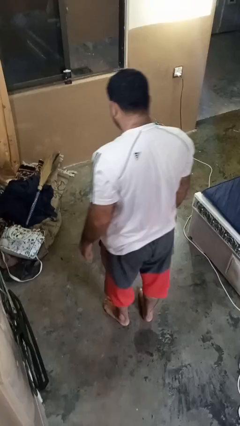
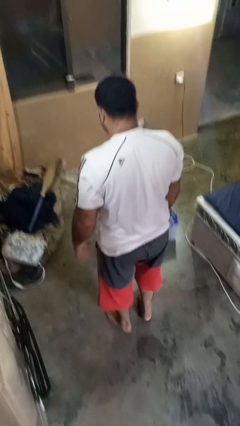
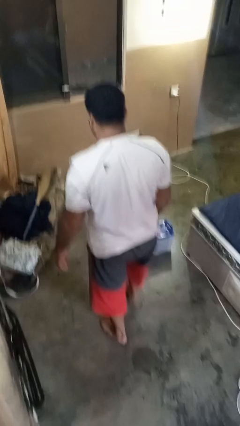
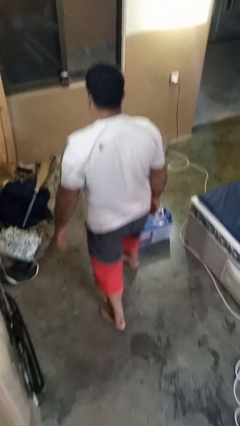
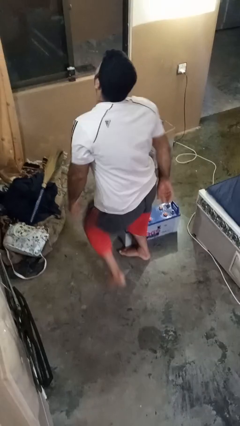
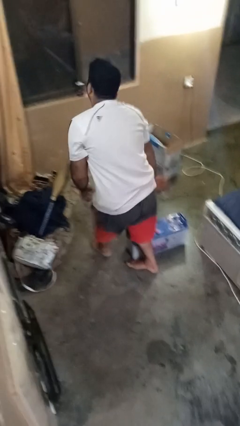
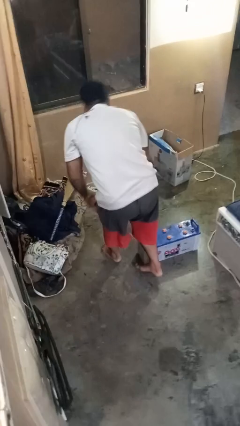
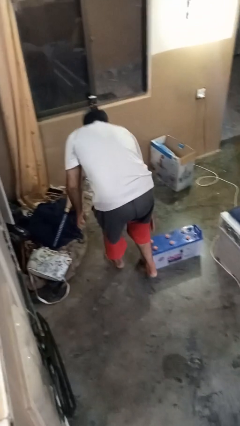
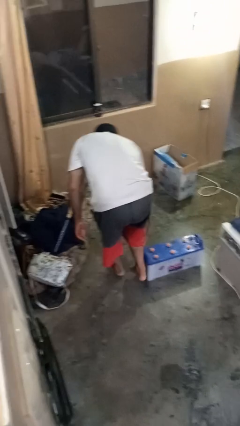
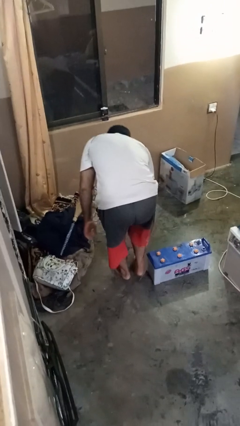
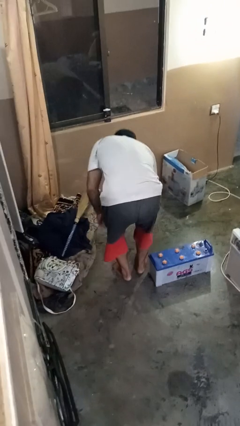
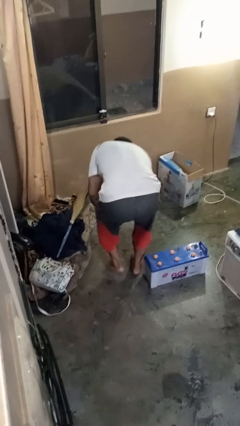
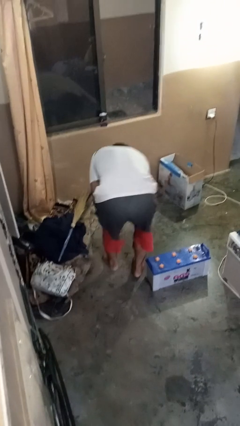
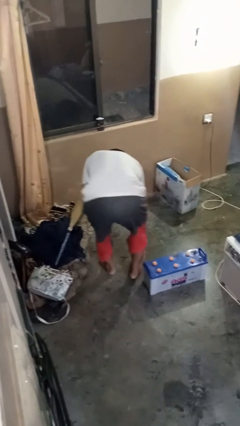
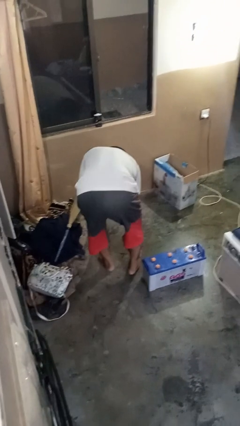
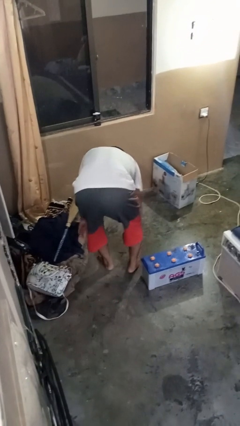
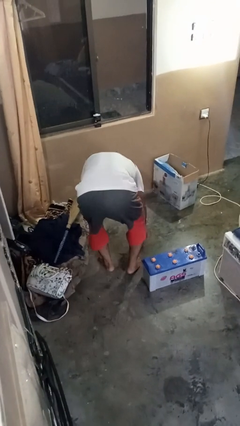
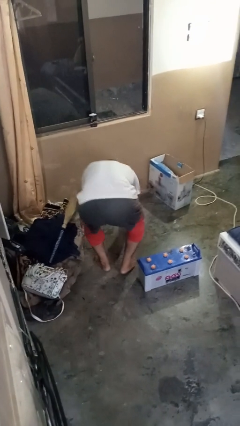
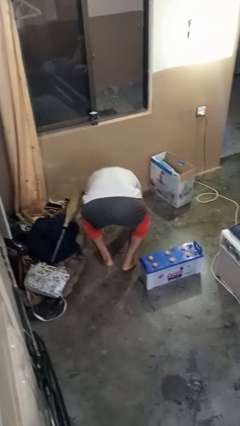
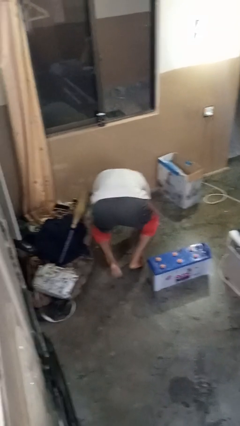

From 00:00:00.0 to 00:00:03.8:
person trips on object on floor

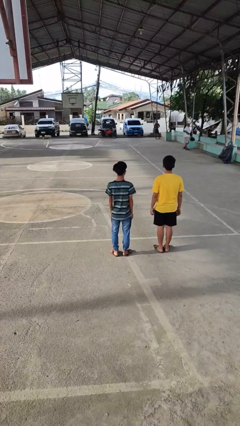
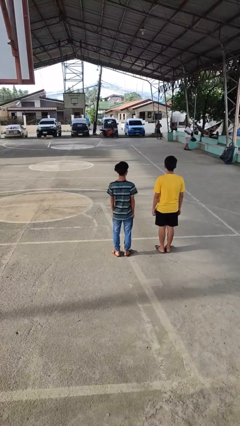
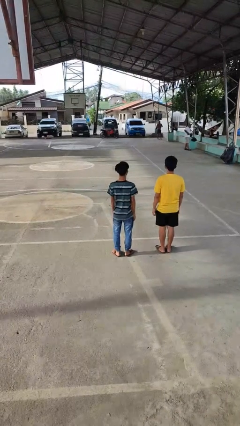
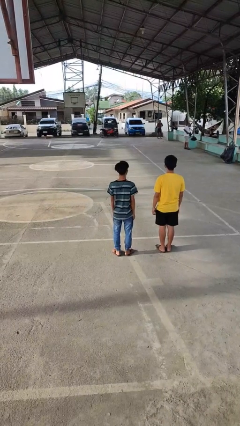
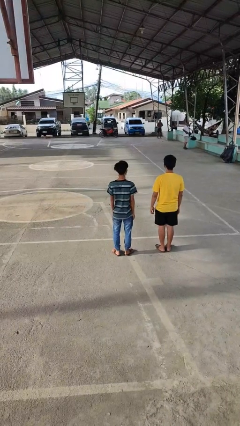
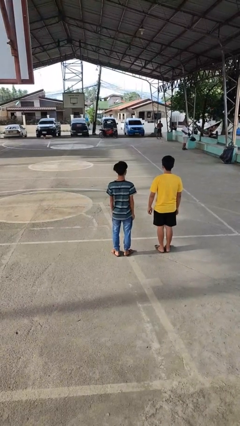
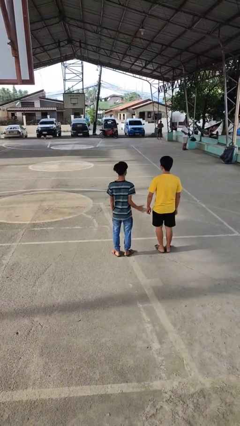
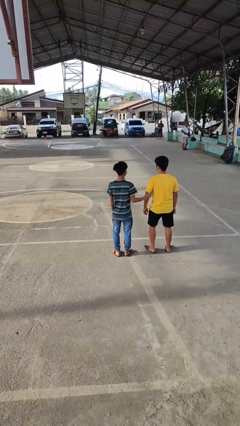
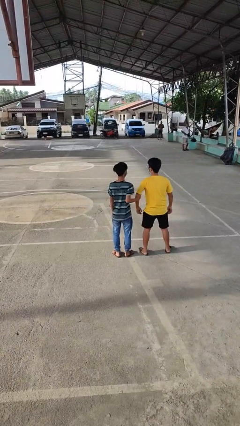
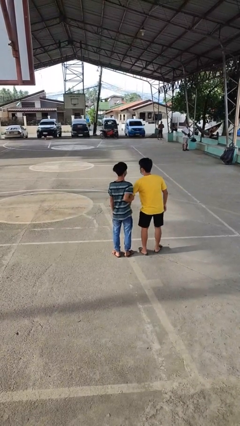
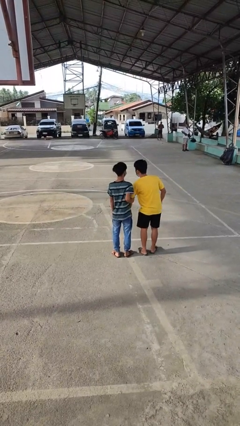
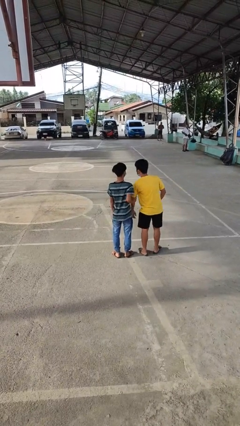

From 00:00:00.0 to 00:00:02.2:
person grabs person by bicep

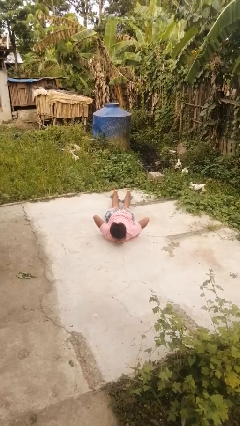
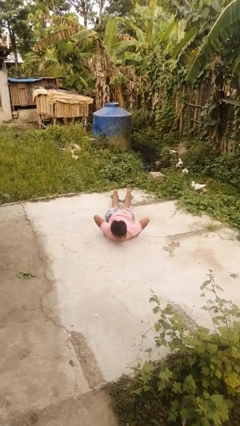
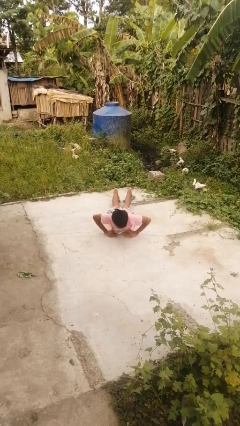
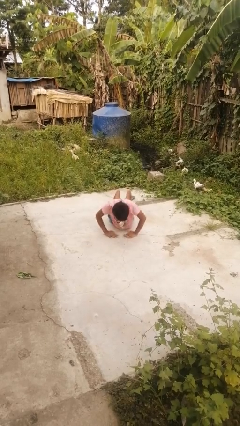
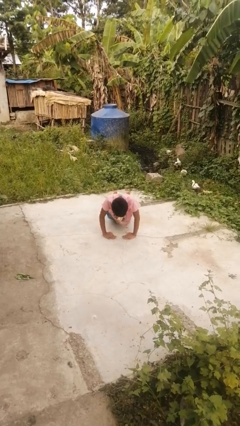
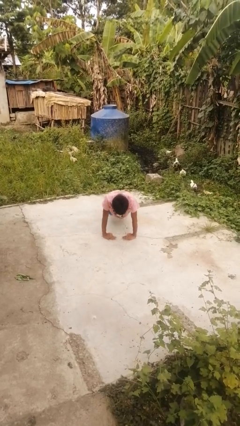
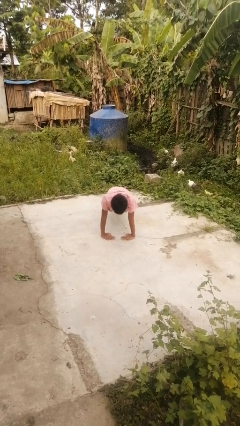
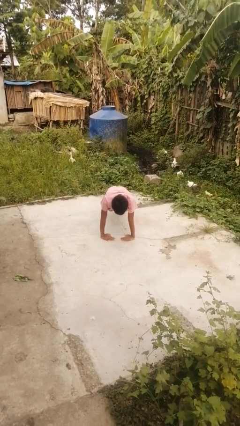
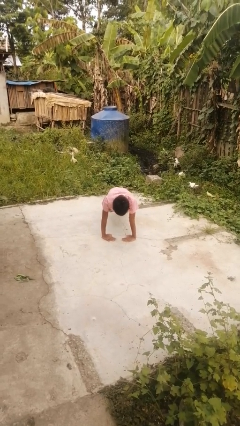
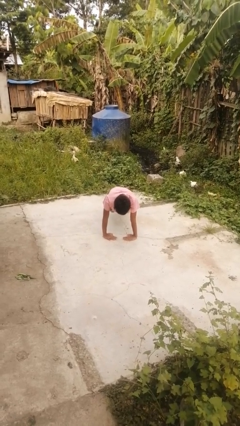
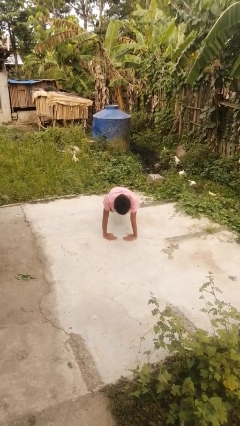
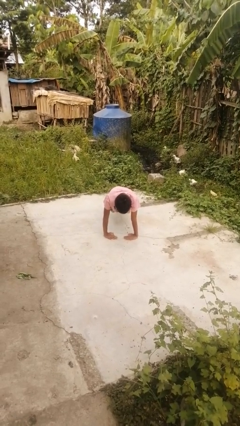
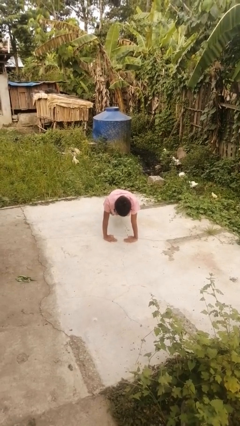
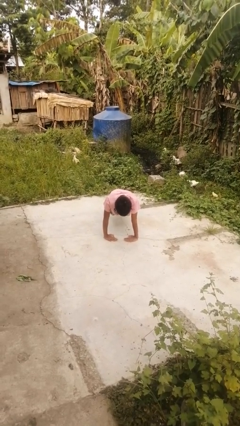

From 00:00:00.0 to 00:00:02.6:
person exercises with pushup

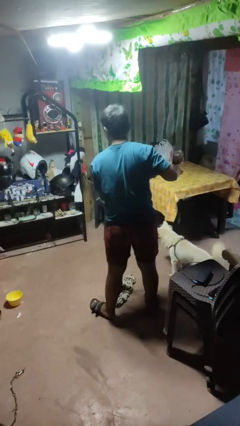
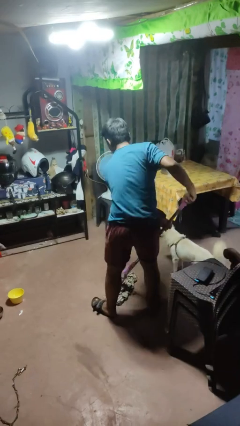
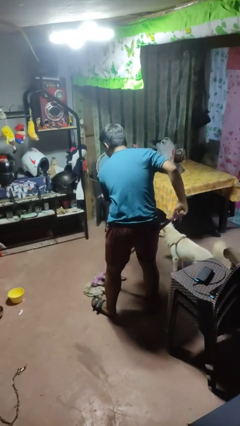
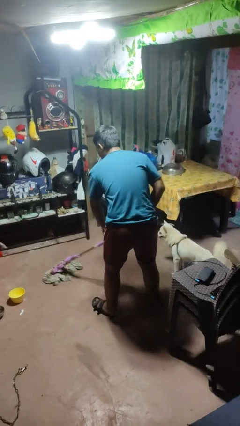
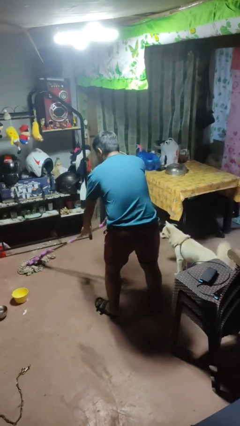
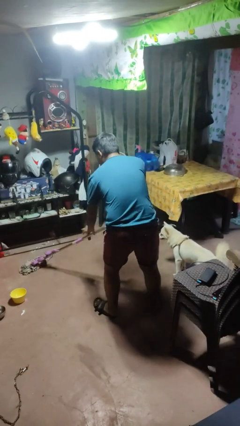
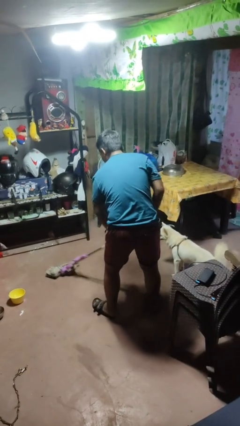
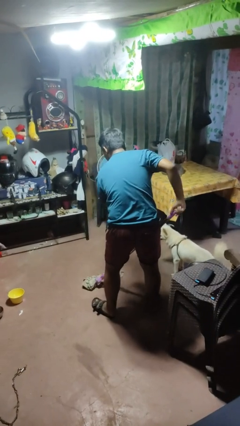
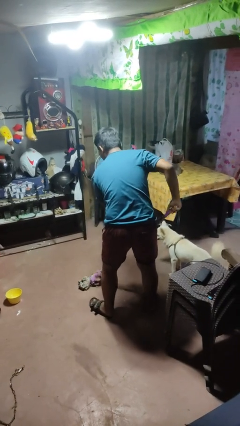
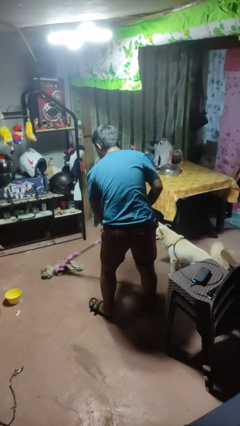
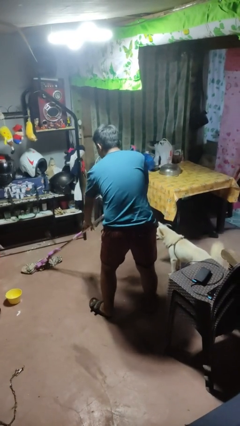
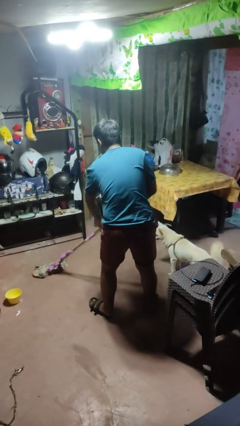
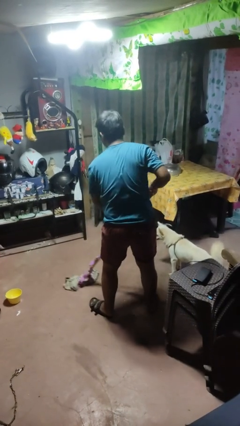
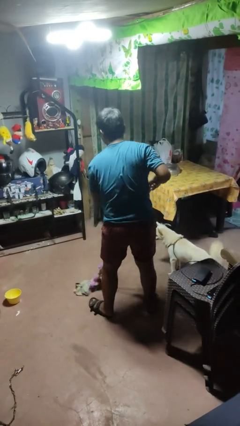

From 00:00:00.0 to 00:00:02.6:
person mops

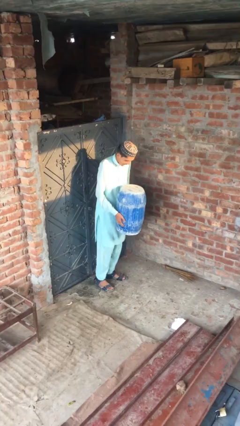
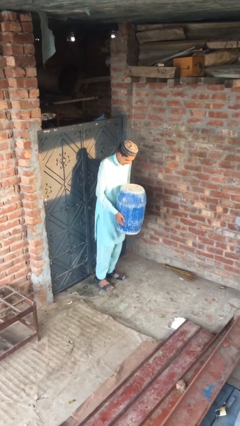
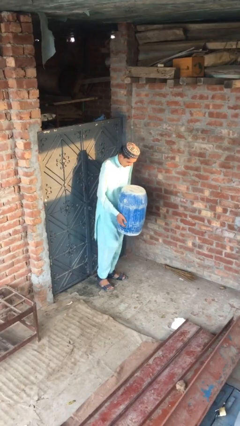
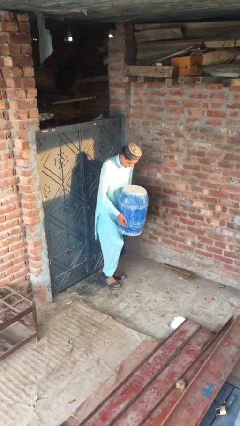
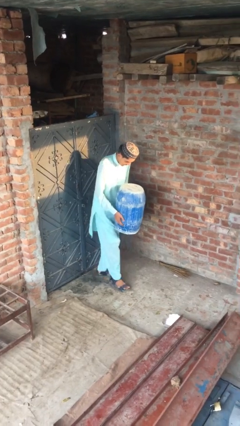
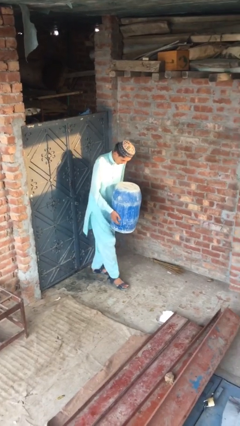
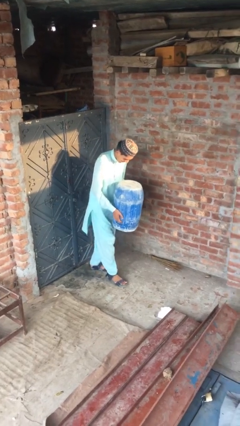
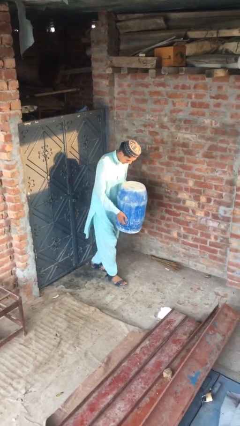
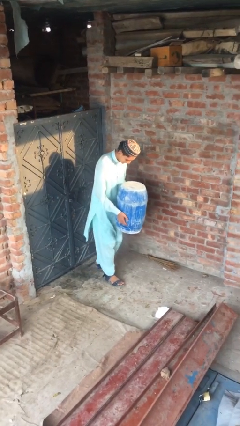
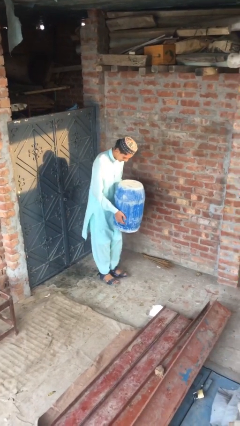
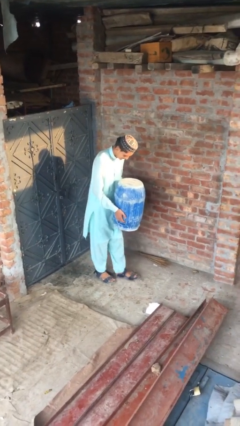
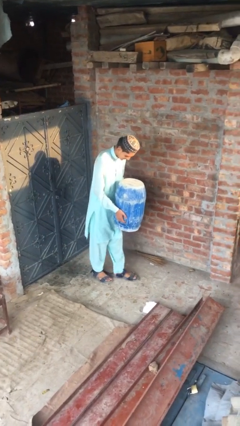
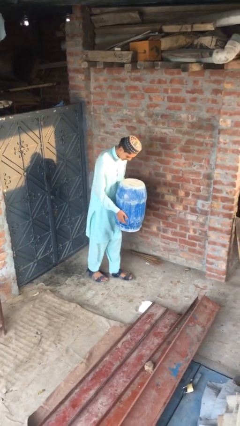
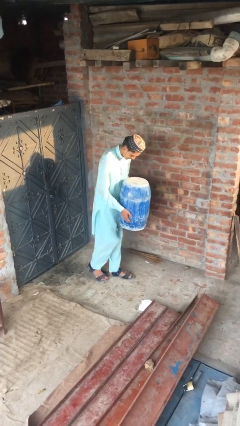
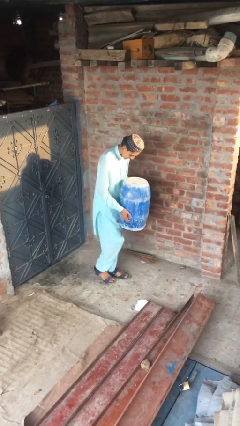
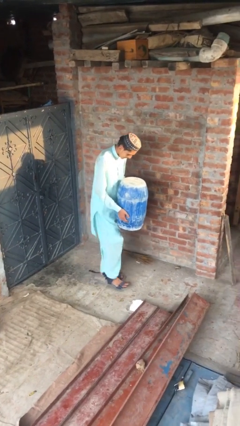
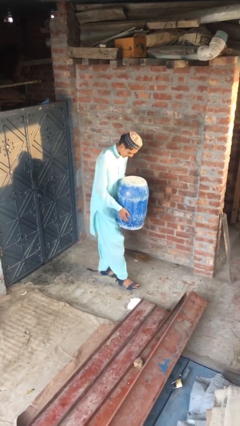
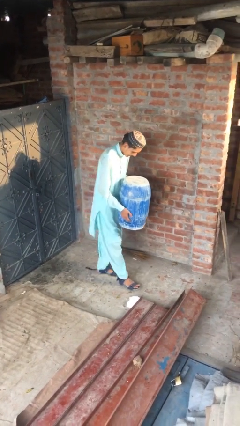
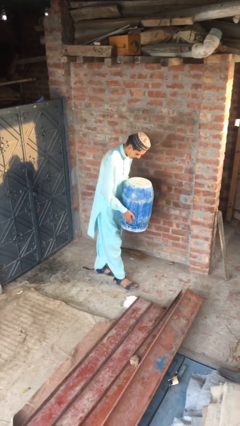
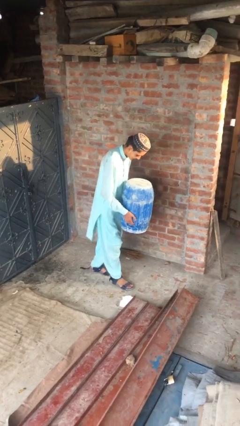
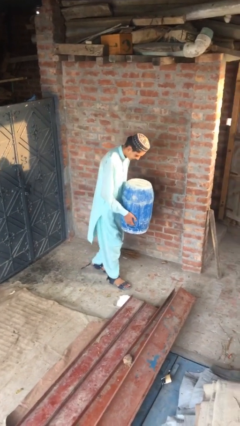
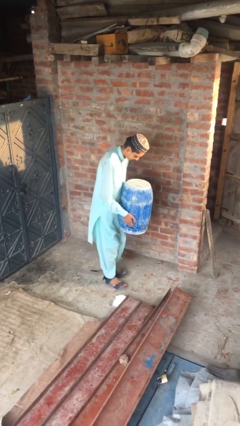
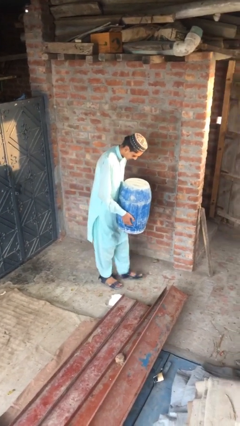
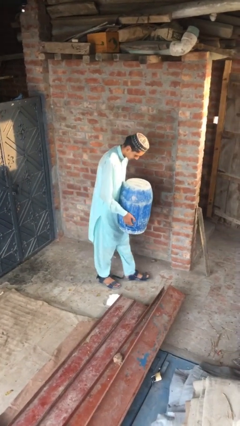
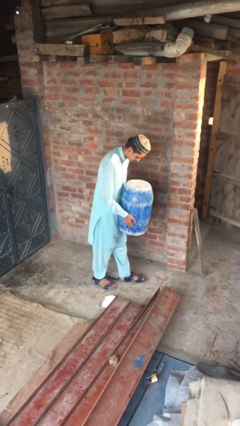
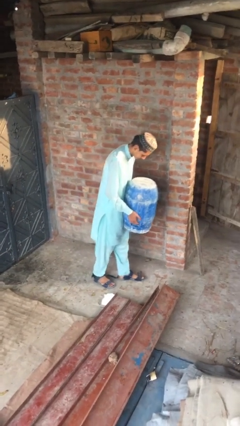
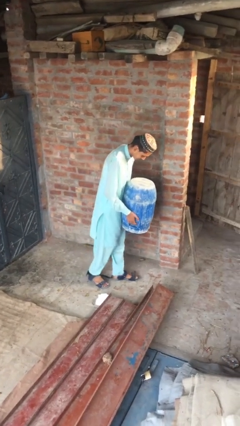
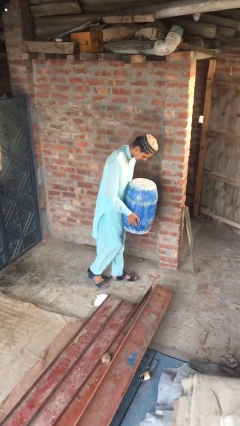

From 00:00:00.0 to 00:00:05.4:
person carries heavy object

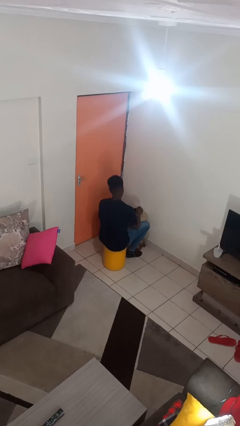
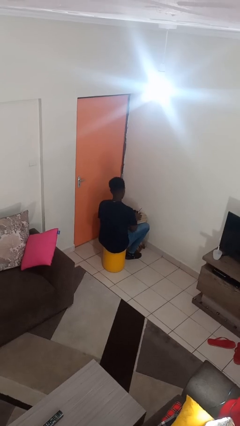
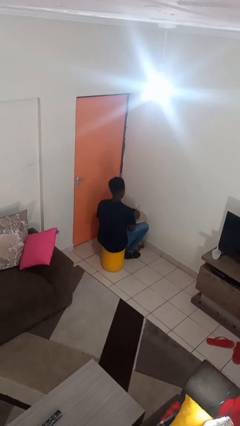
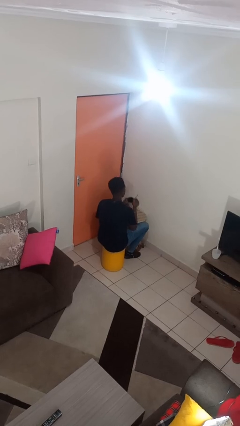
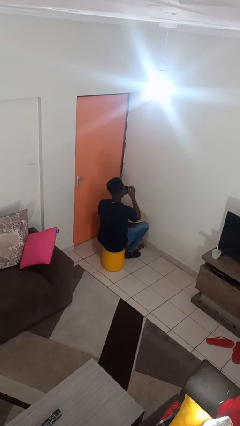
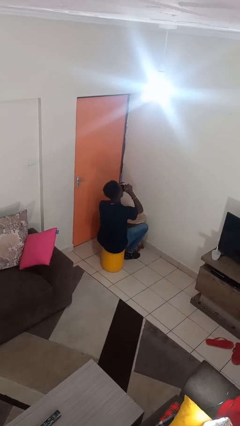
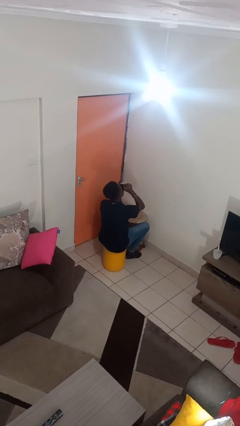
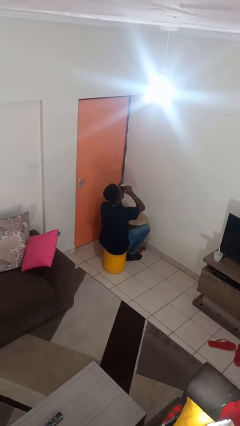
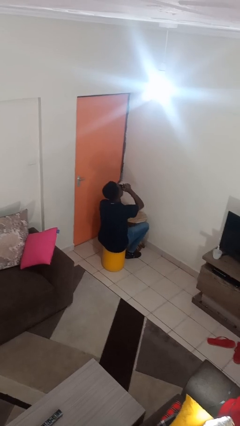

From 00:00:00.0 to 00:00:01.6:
person drinks from mug
